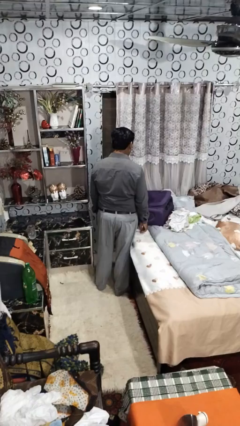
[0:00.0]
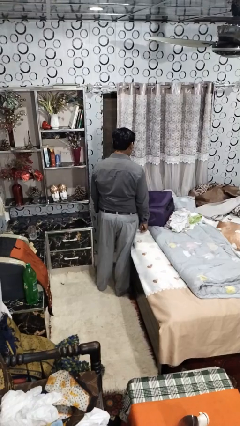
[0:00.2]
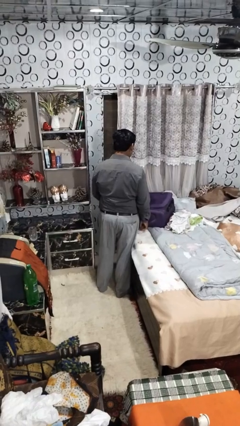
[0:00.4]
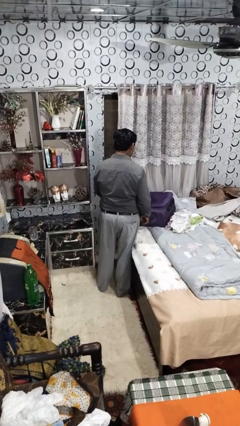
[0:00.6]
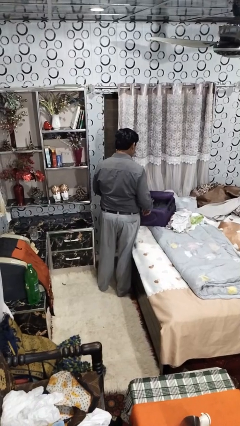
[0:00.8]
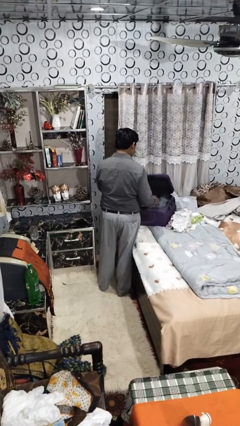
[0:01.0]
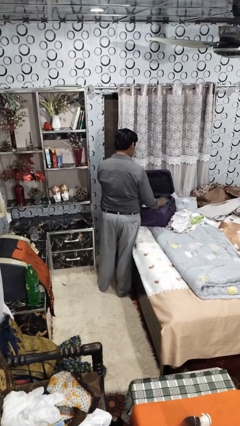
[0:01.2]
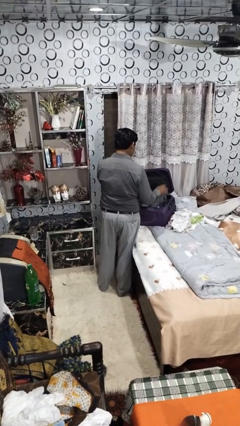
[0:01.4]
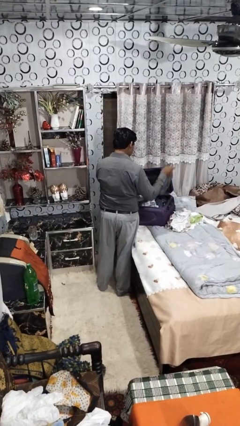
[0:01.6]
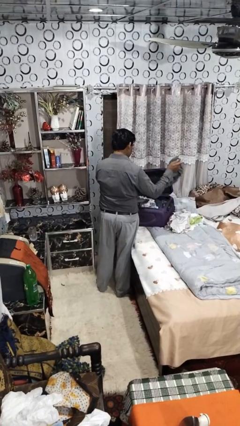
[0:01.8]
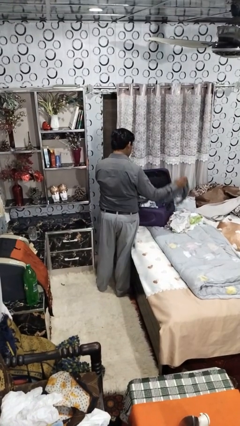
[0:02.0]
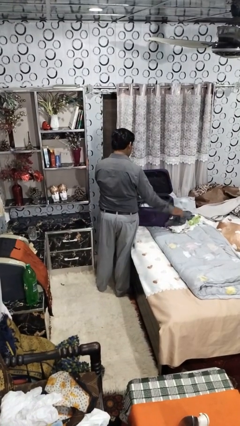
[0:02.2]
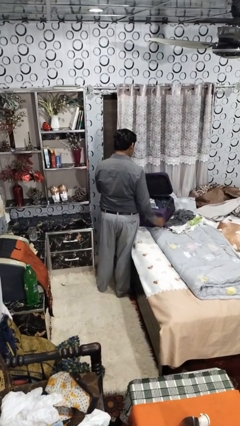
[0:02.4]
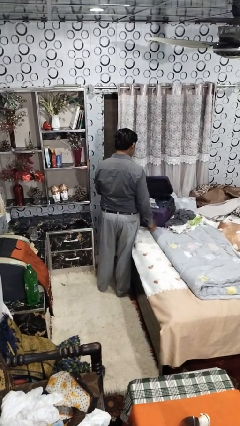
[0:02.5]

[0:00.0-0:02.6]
person unloads clothes from suitcase

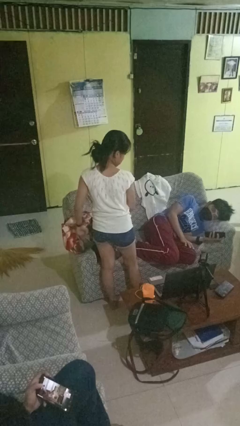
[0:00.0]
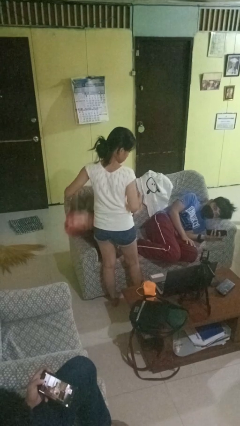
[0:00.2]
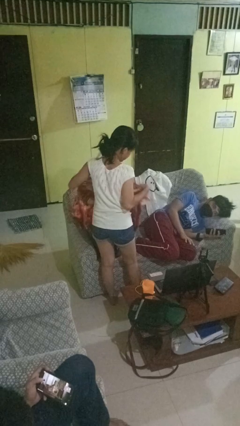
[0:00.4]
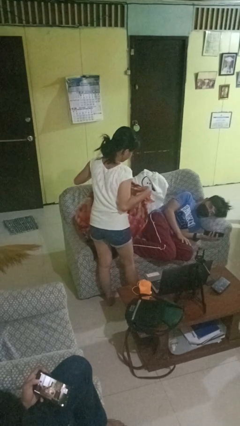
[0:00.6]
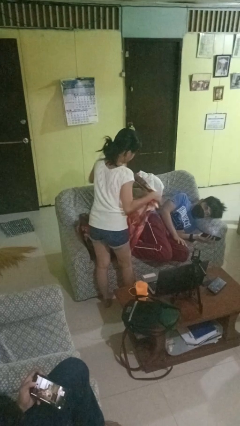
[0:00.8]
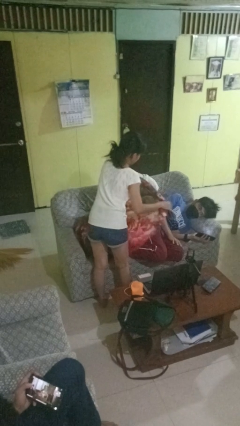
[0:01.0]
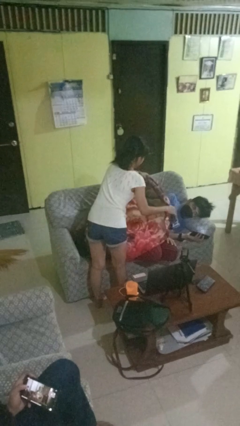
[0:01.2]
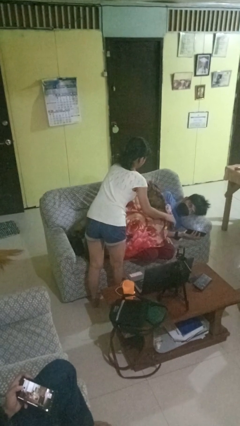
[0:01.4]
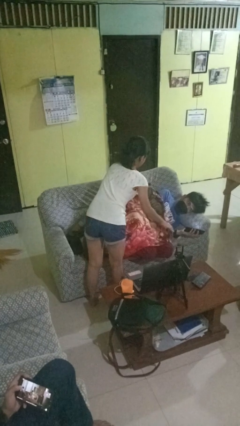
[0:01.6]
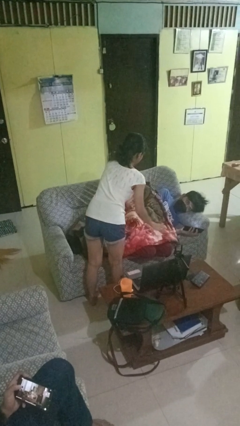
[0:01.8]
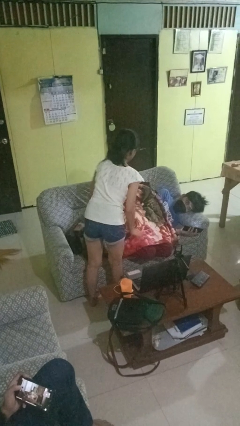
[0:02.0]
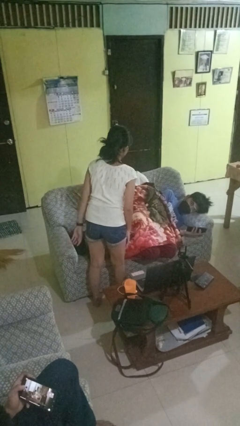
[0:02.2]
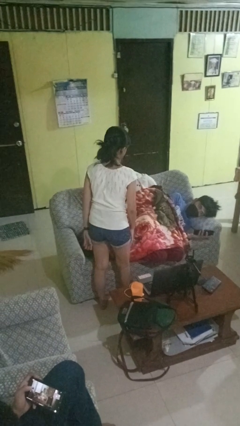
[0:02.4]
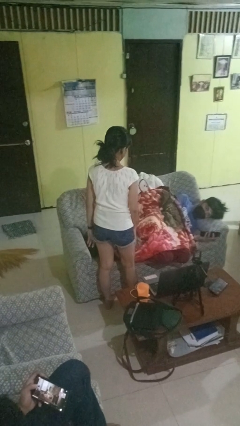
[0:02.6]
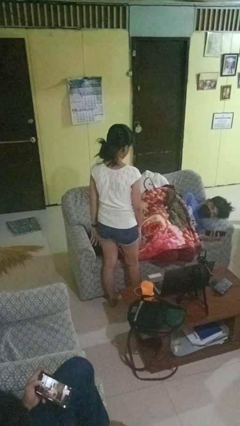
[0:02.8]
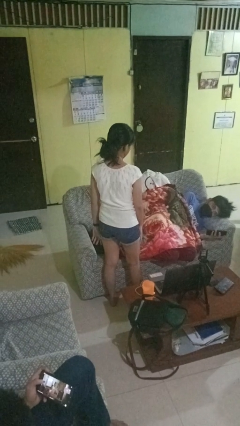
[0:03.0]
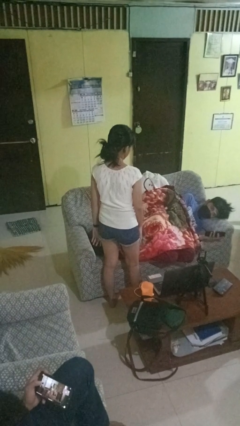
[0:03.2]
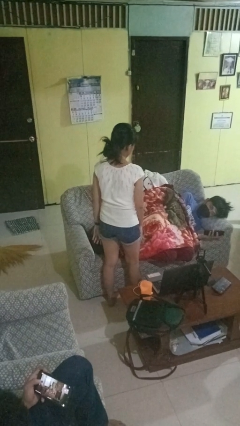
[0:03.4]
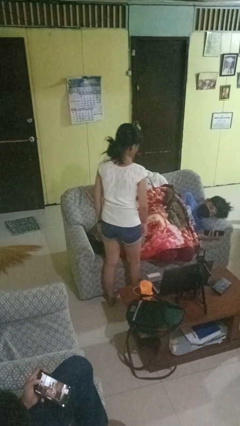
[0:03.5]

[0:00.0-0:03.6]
person covers friend with blanket

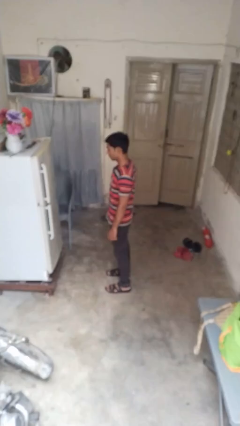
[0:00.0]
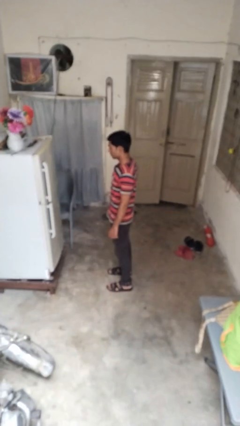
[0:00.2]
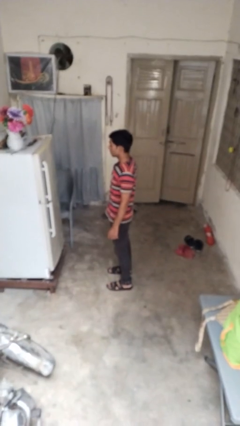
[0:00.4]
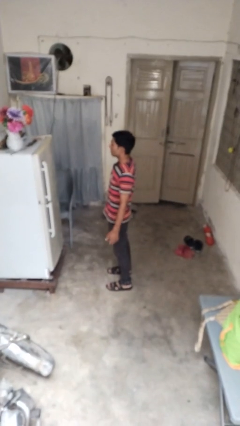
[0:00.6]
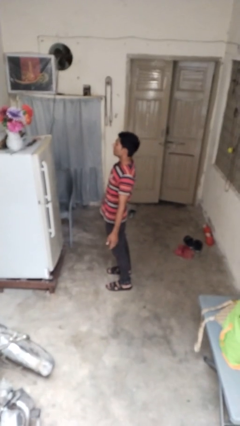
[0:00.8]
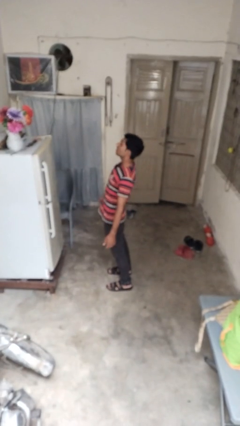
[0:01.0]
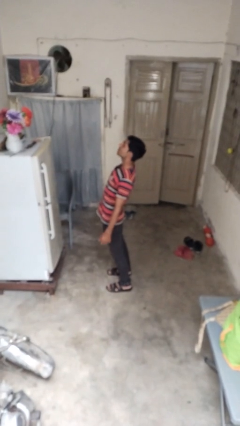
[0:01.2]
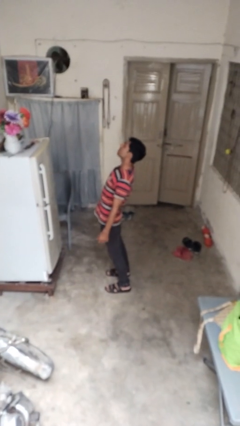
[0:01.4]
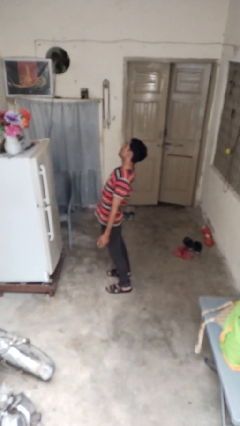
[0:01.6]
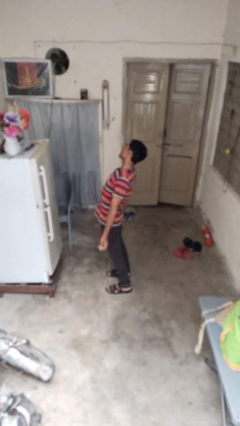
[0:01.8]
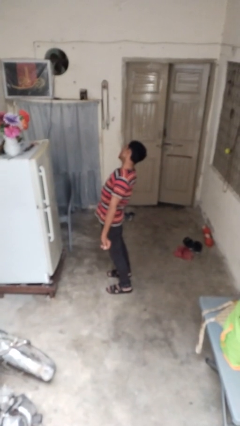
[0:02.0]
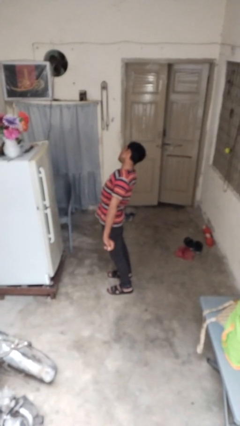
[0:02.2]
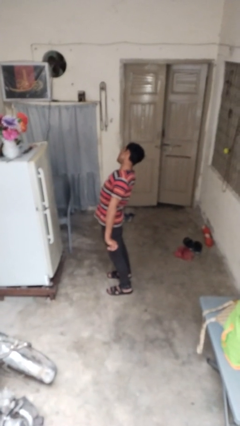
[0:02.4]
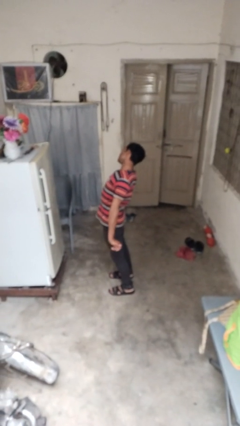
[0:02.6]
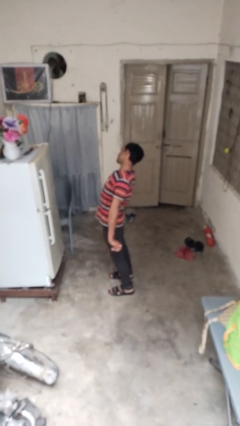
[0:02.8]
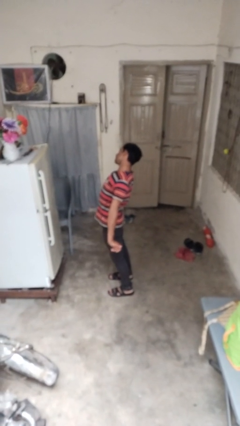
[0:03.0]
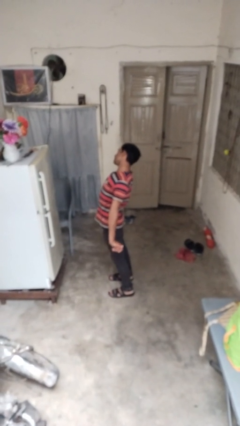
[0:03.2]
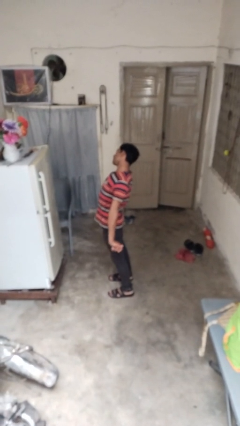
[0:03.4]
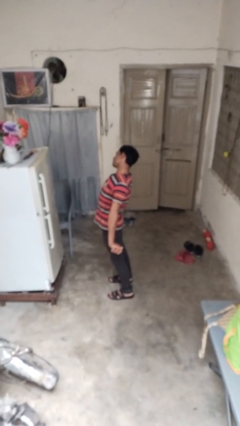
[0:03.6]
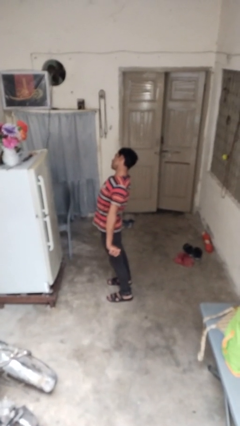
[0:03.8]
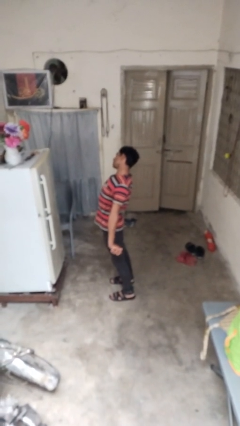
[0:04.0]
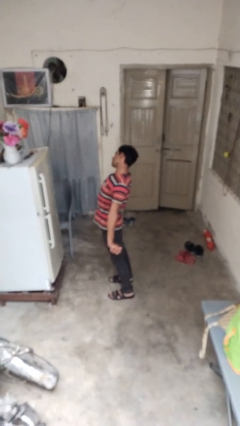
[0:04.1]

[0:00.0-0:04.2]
person stretches back

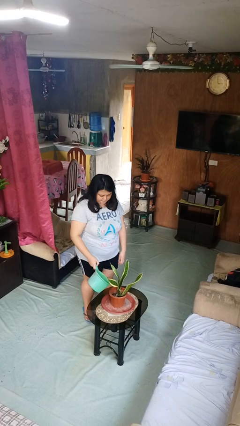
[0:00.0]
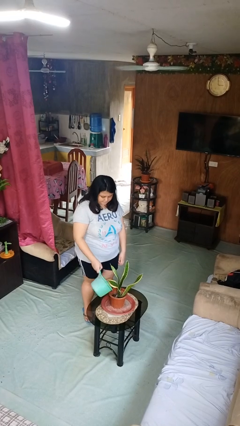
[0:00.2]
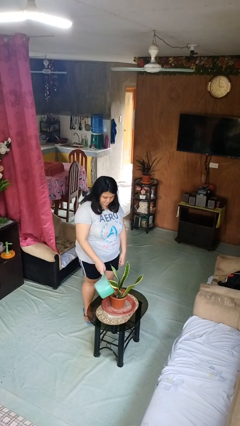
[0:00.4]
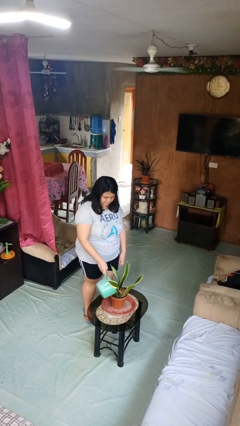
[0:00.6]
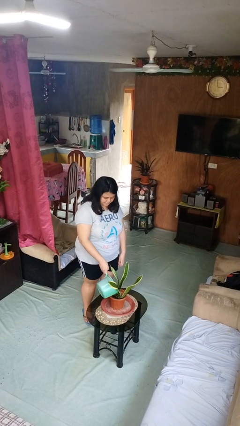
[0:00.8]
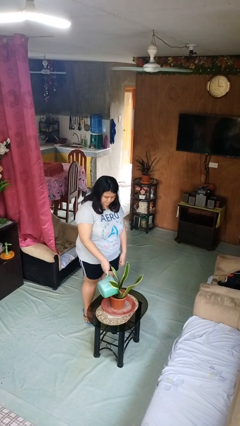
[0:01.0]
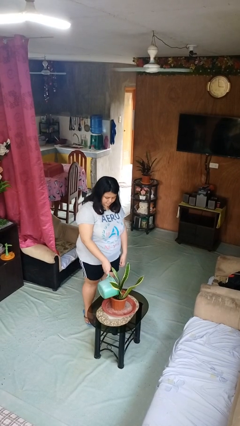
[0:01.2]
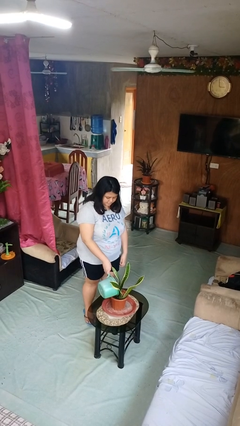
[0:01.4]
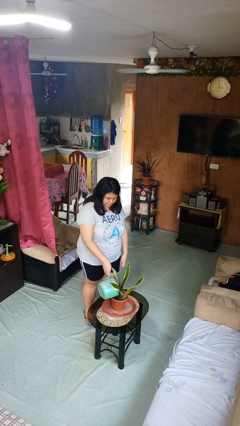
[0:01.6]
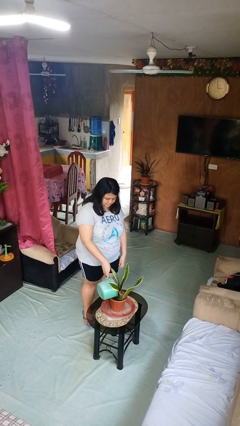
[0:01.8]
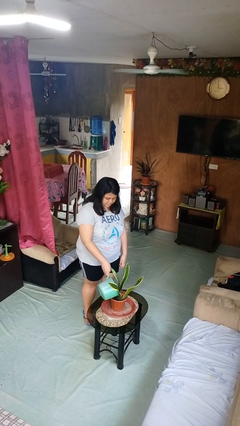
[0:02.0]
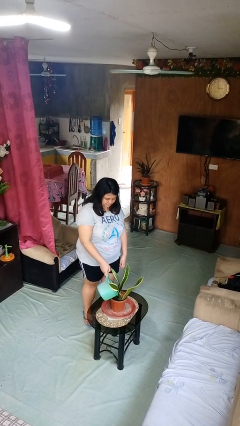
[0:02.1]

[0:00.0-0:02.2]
person waters houseplant

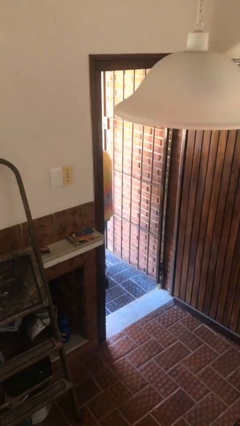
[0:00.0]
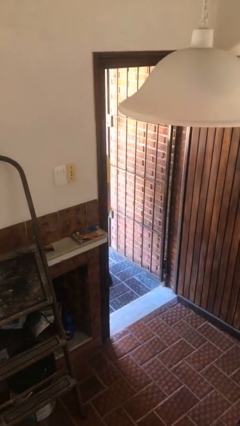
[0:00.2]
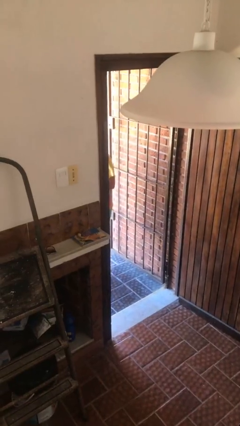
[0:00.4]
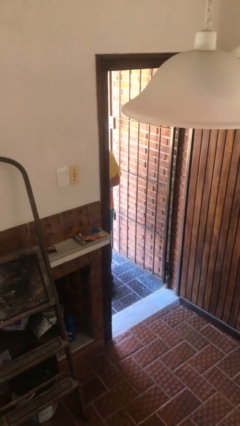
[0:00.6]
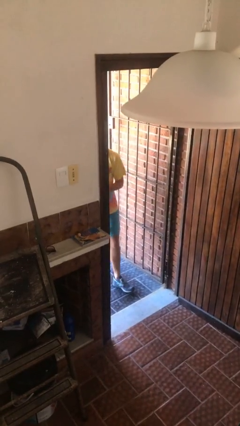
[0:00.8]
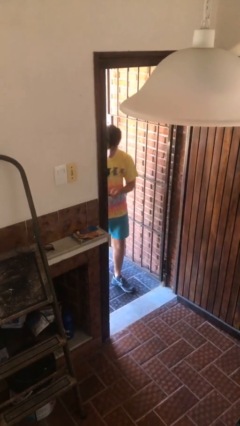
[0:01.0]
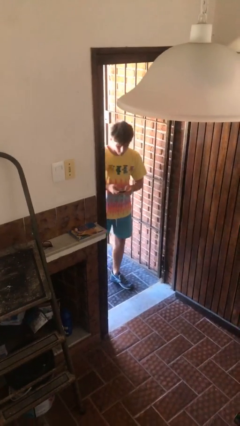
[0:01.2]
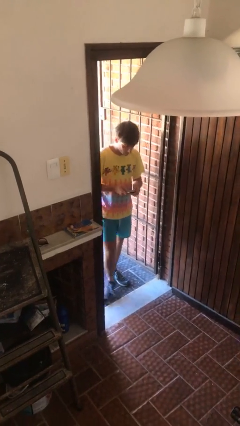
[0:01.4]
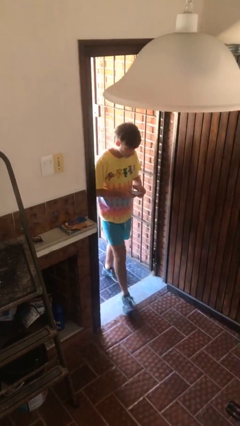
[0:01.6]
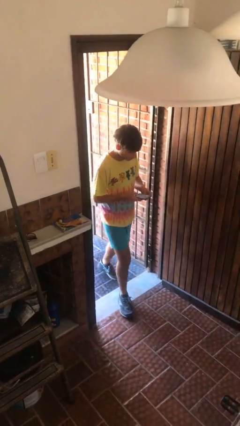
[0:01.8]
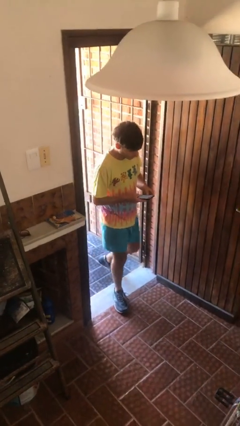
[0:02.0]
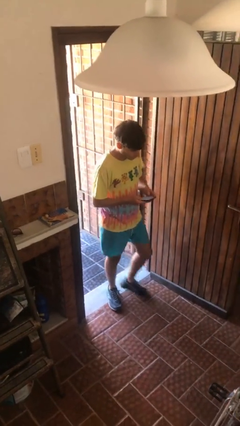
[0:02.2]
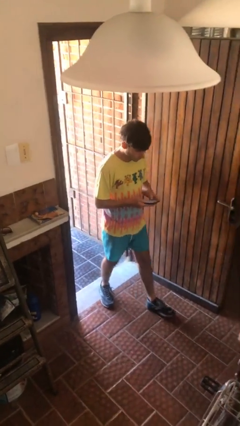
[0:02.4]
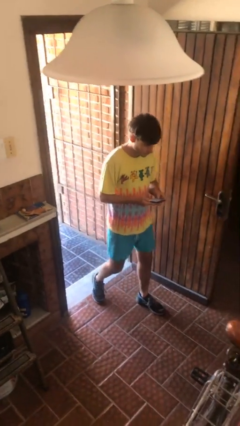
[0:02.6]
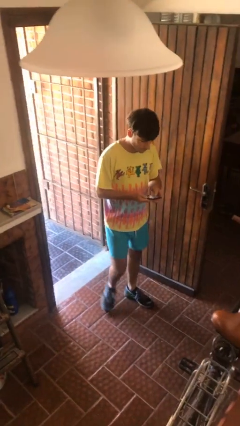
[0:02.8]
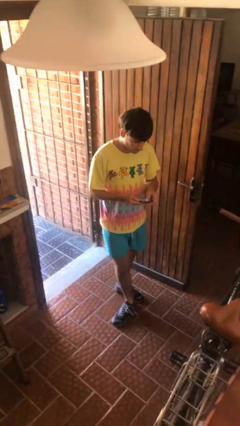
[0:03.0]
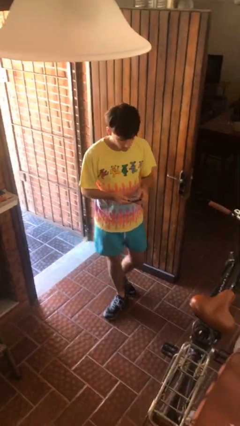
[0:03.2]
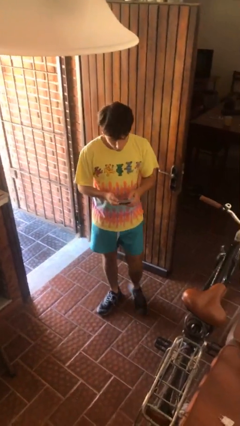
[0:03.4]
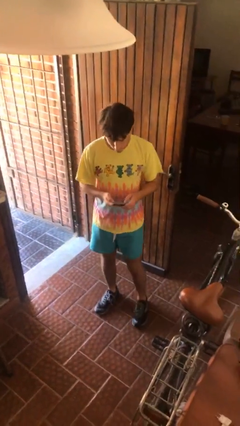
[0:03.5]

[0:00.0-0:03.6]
person enters scene through structure

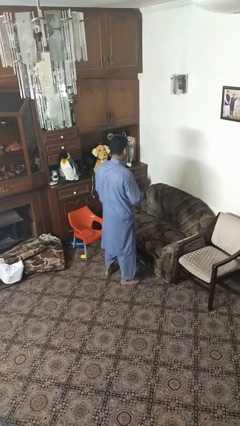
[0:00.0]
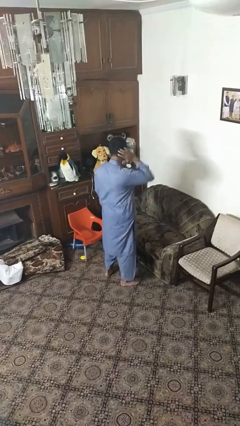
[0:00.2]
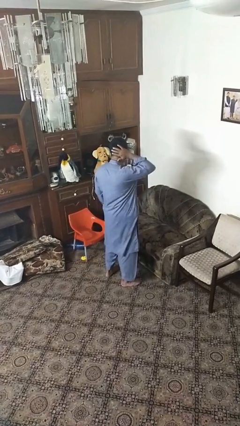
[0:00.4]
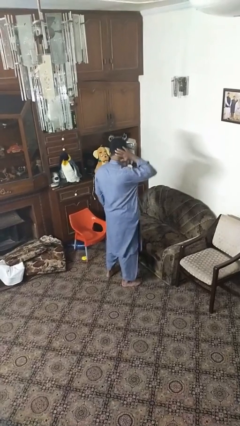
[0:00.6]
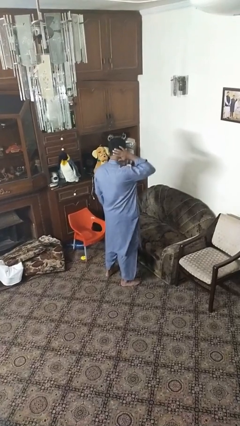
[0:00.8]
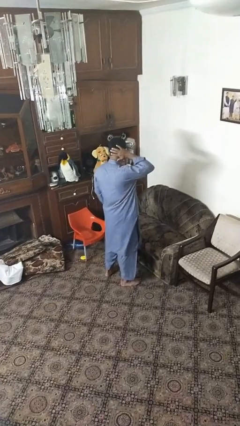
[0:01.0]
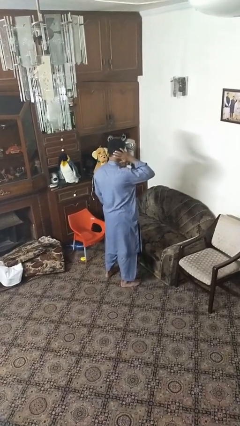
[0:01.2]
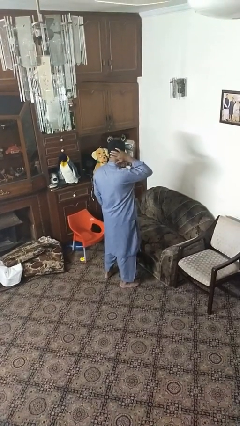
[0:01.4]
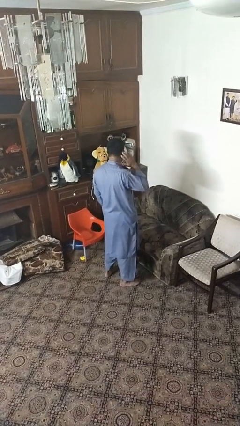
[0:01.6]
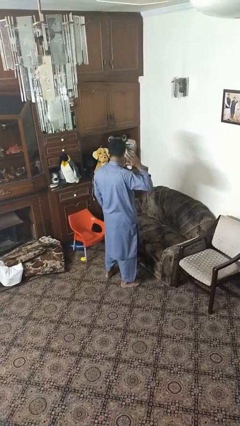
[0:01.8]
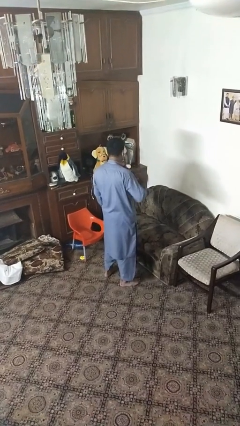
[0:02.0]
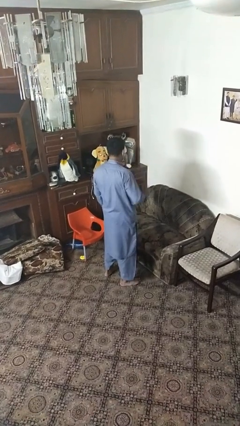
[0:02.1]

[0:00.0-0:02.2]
person strokes hair
